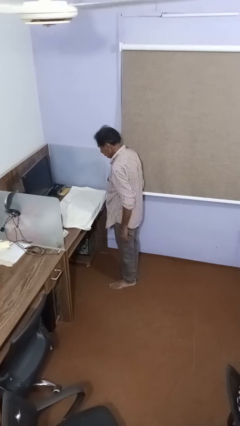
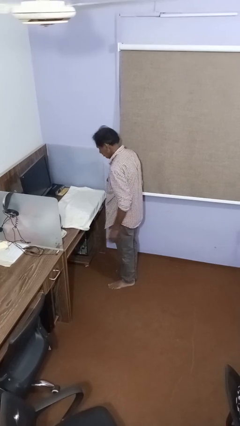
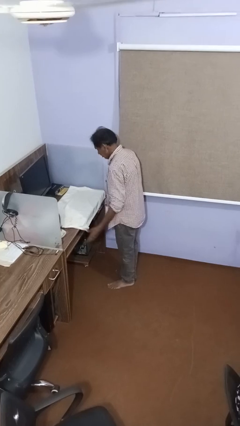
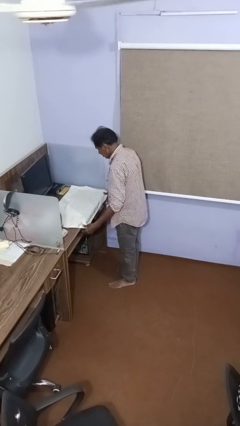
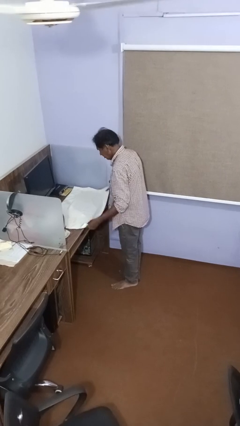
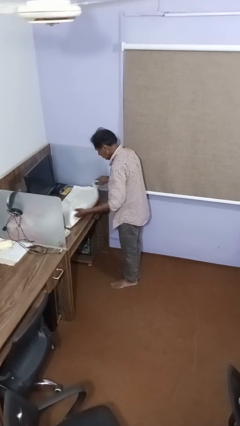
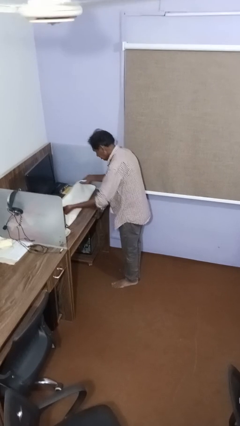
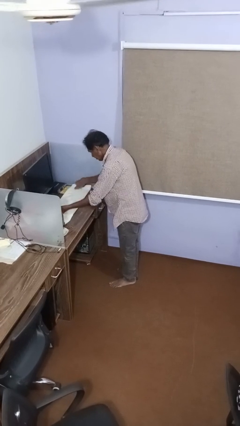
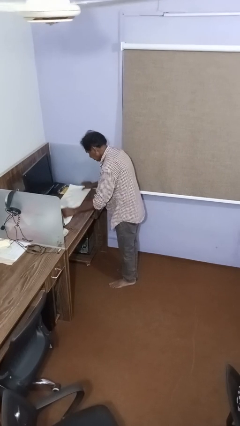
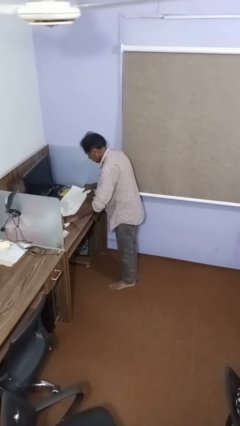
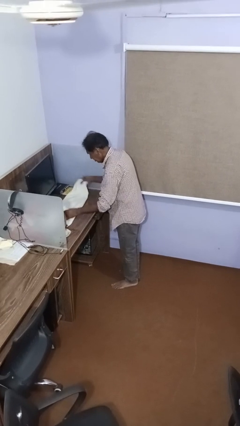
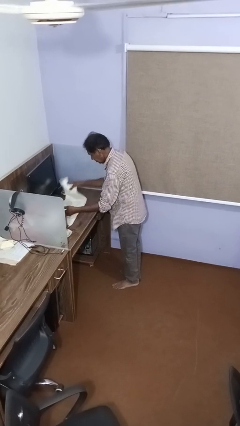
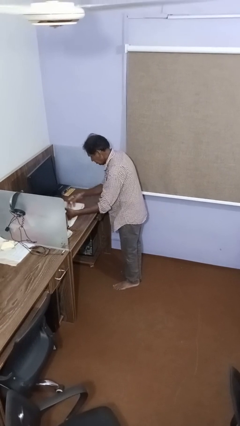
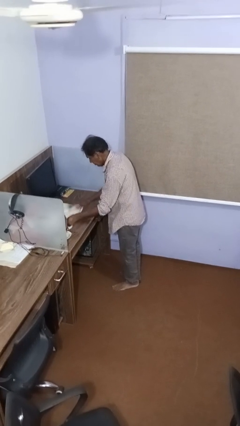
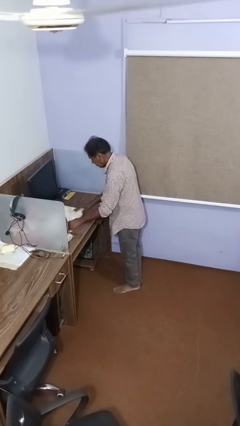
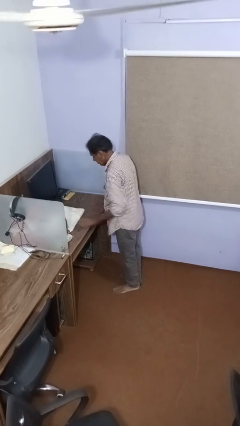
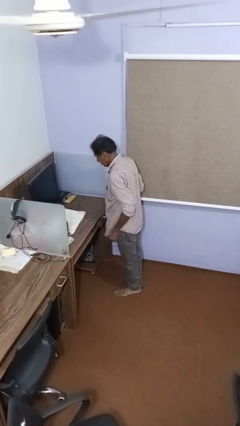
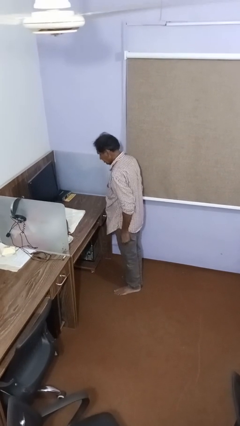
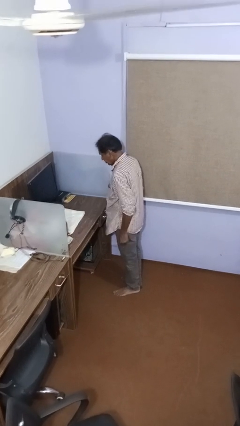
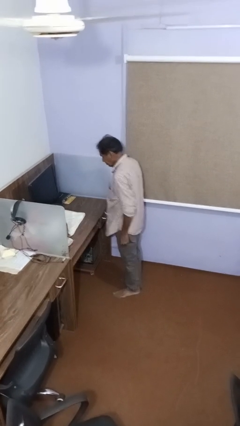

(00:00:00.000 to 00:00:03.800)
person folds towel

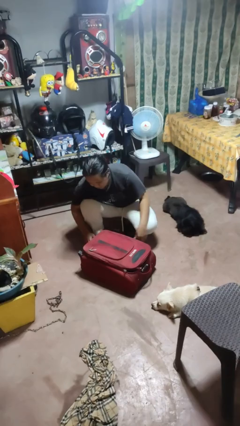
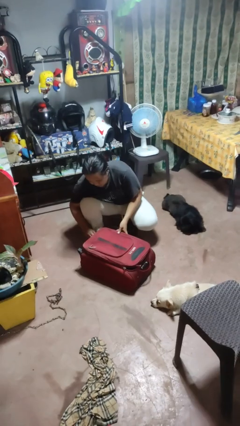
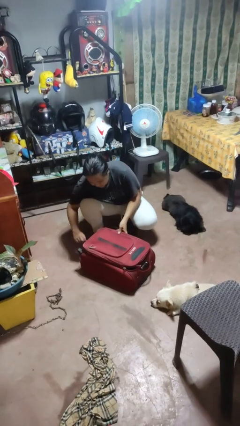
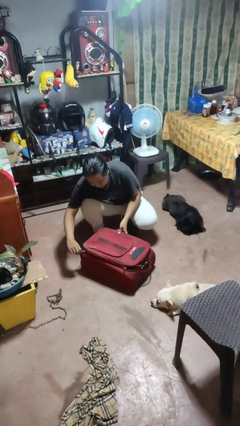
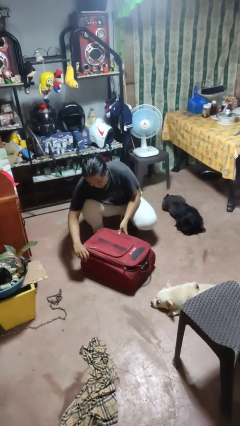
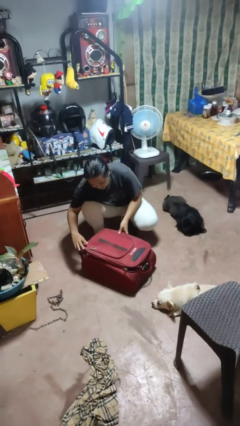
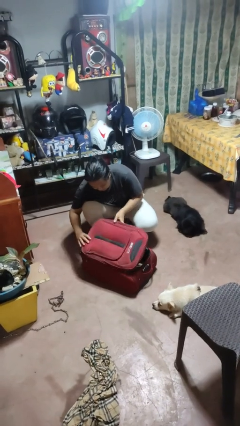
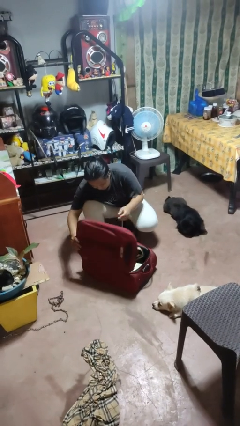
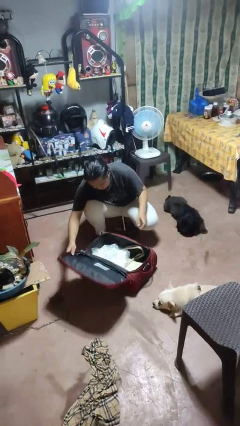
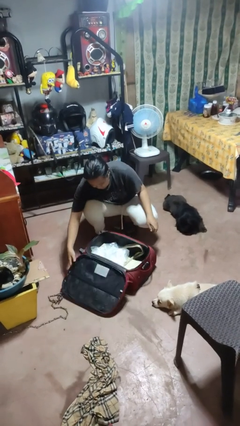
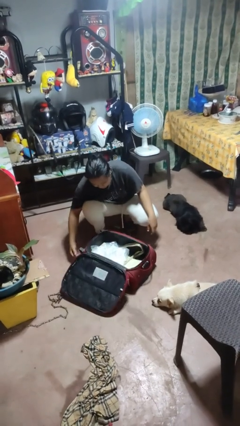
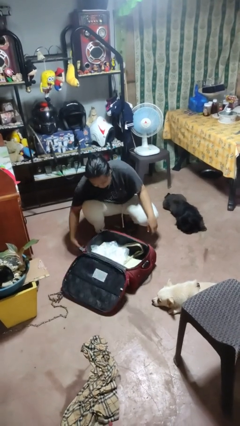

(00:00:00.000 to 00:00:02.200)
person opens suitcase

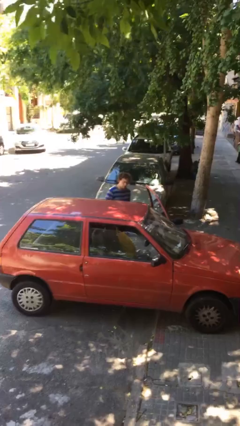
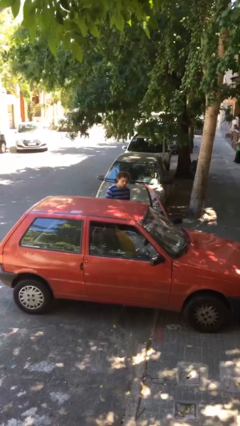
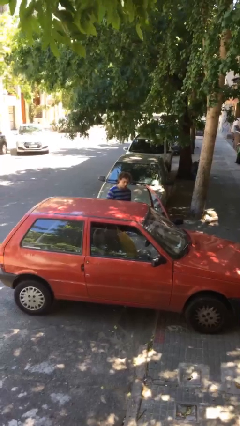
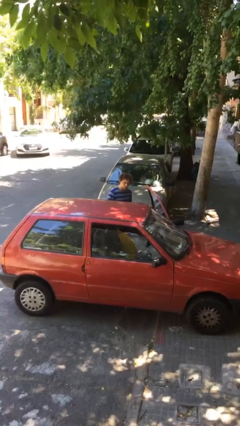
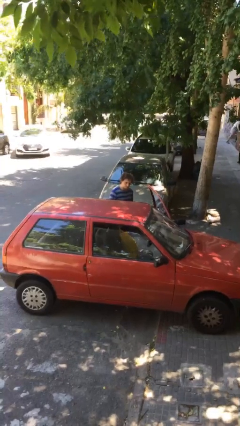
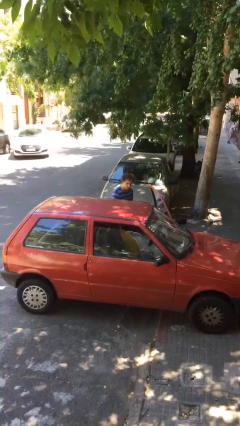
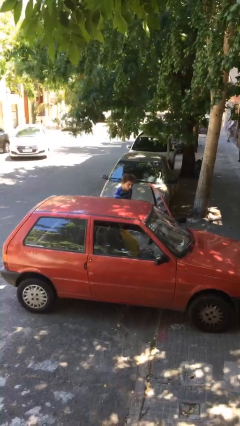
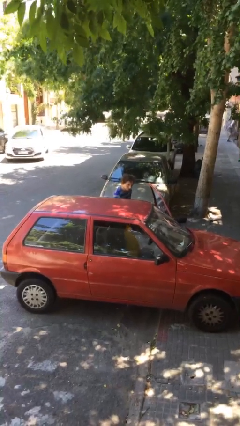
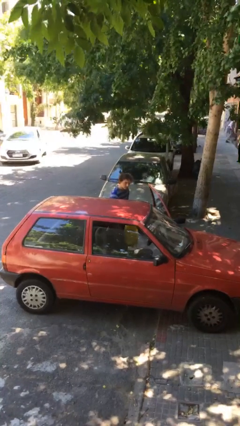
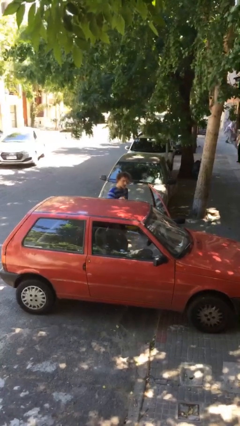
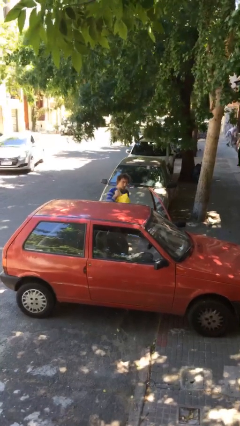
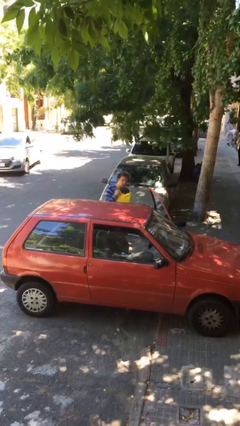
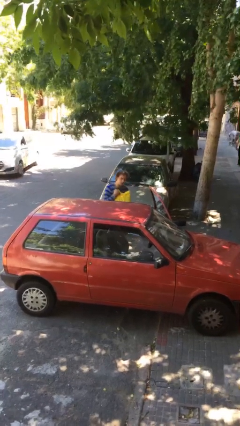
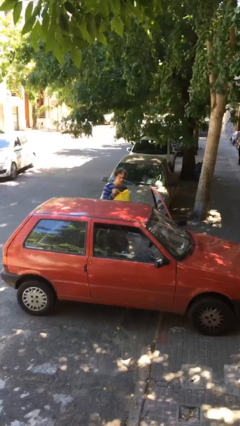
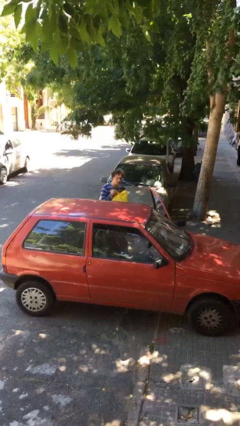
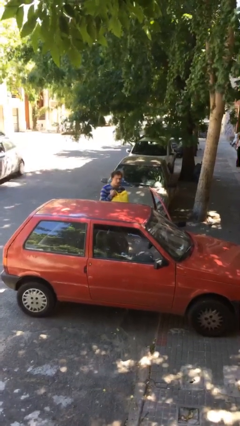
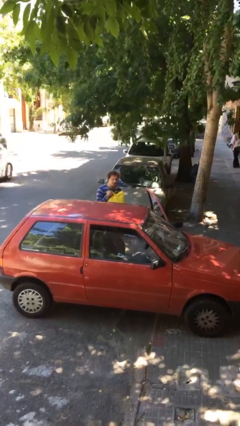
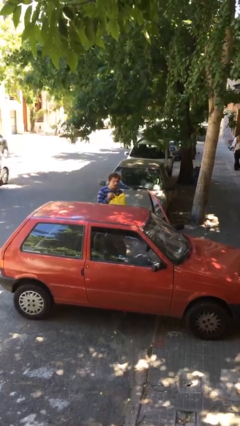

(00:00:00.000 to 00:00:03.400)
person unloads car

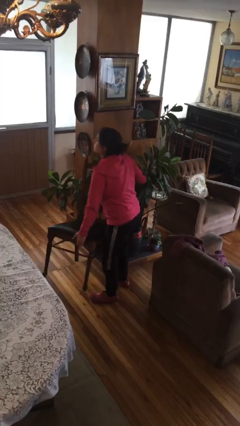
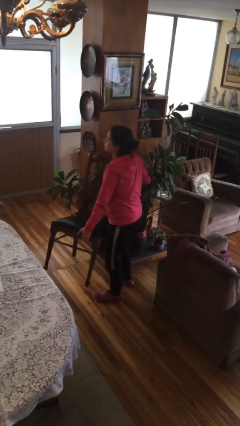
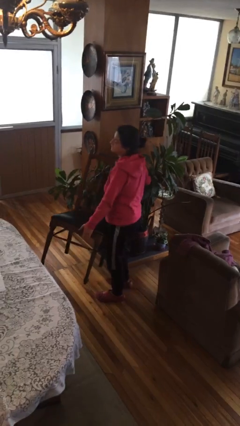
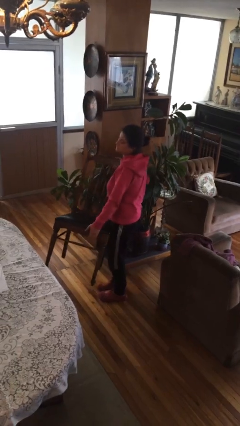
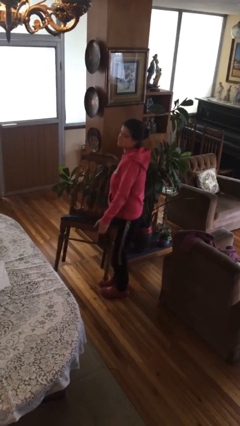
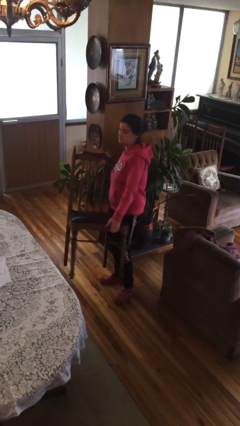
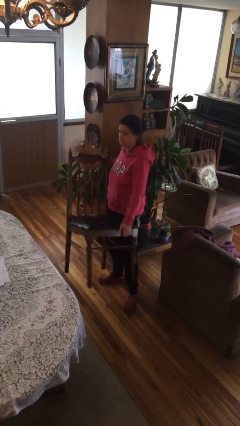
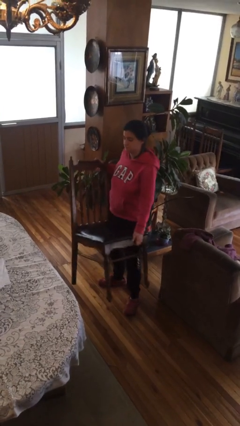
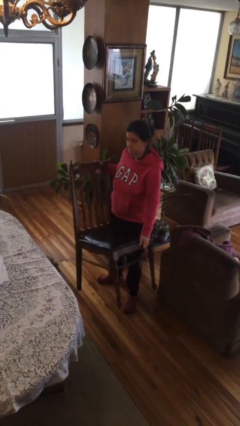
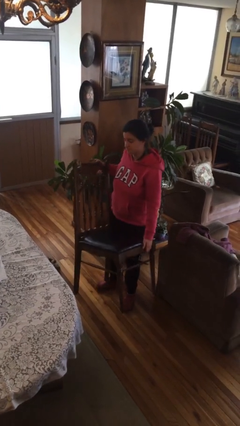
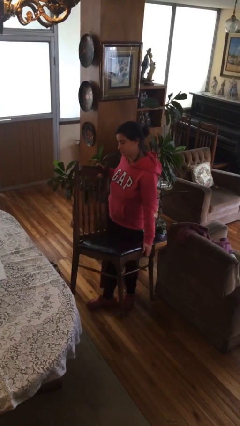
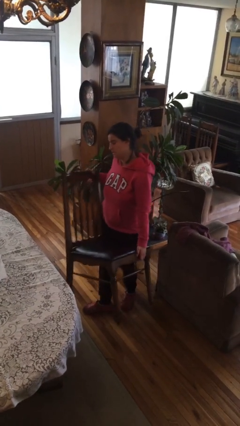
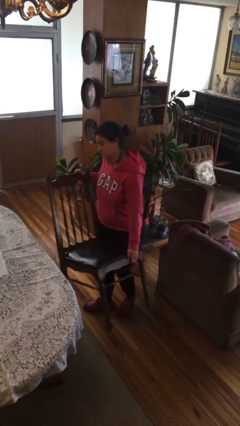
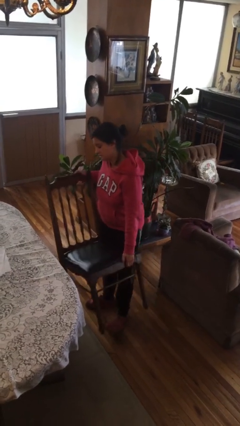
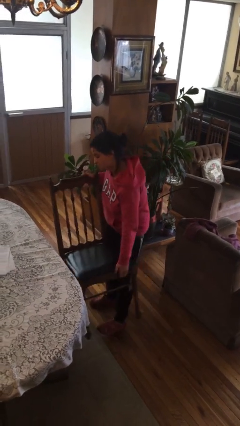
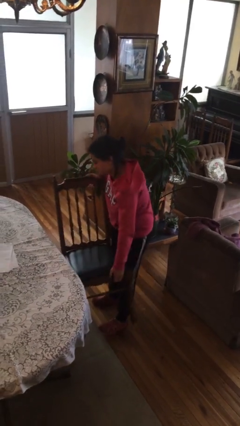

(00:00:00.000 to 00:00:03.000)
person carries heavy object

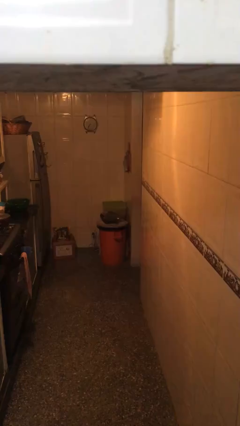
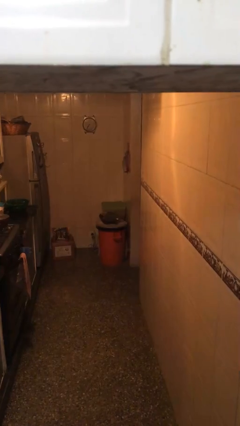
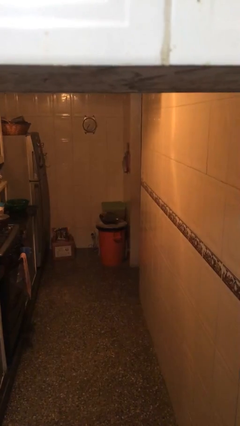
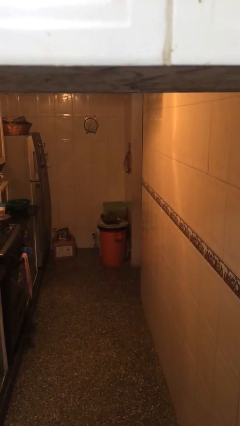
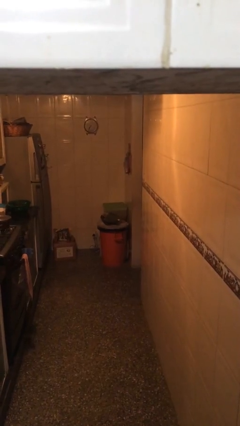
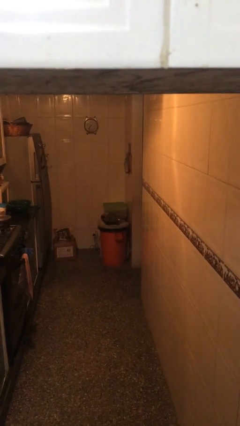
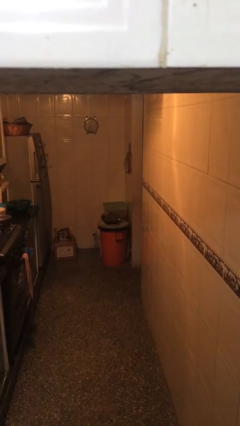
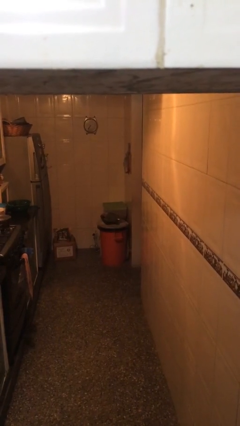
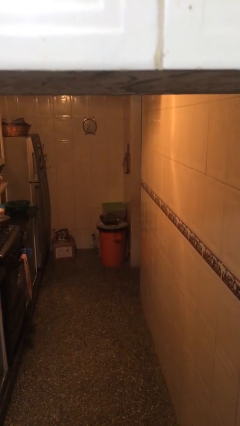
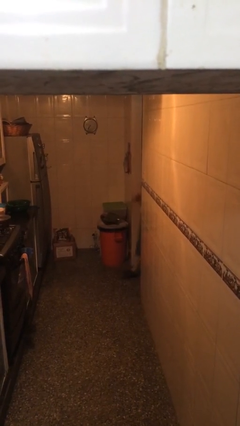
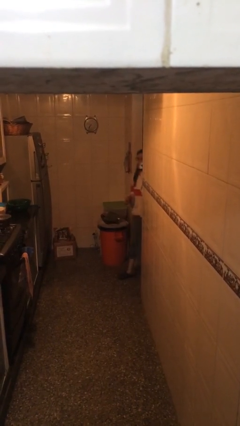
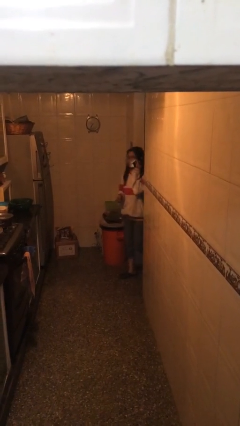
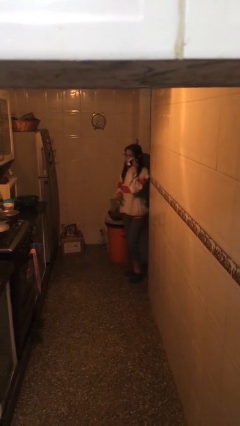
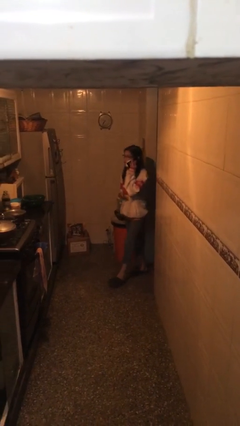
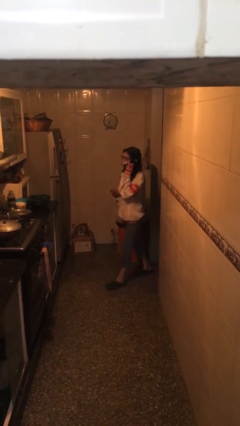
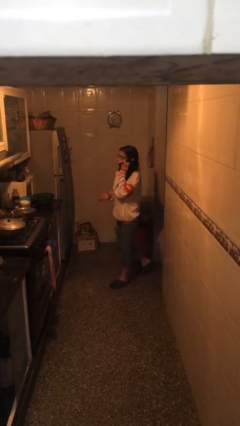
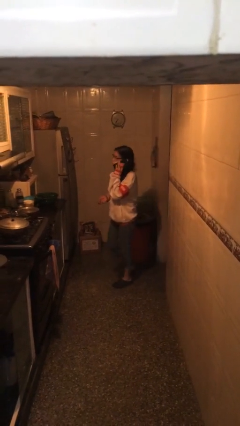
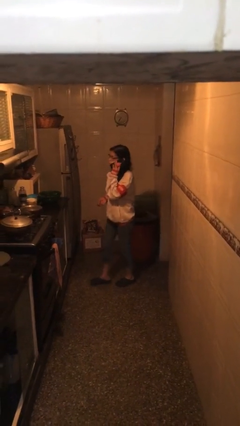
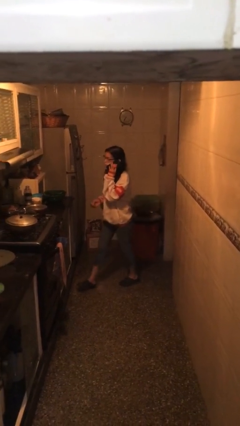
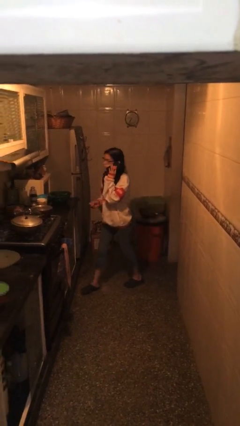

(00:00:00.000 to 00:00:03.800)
person enters scene through structure

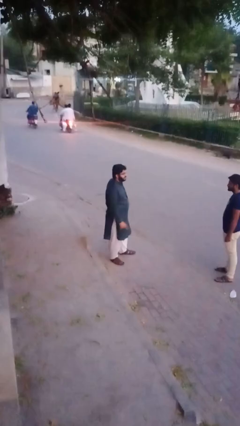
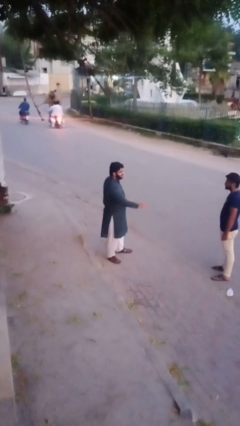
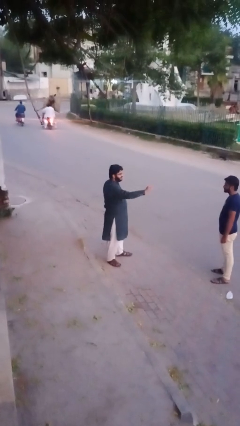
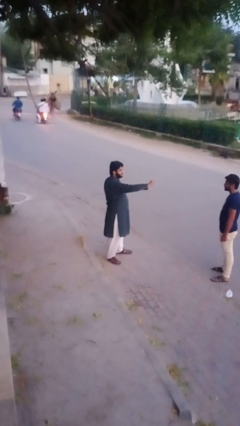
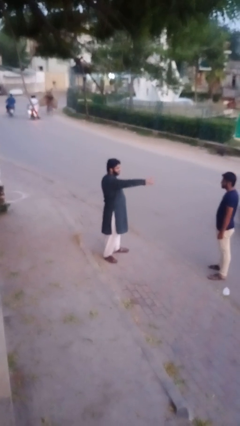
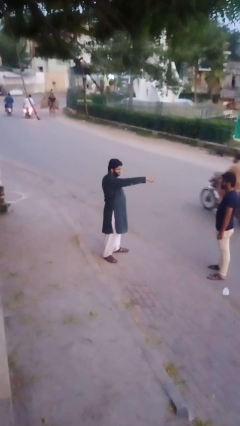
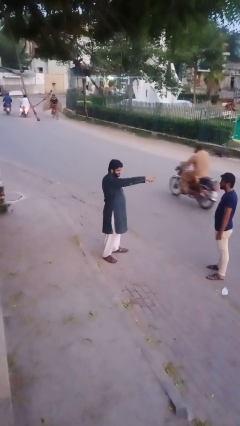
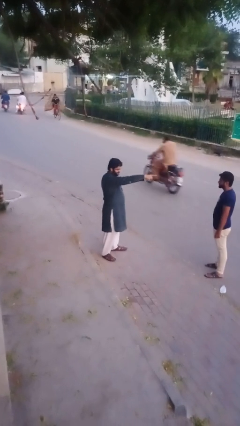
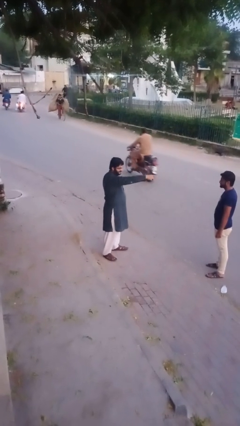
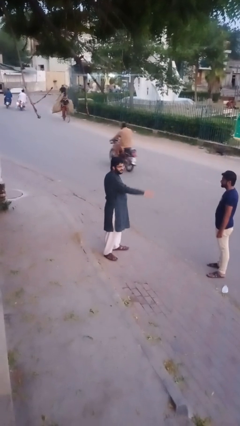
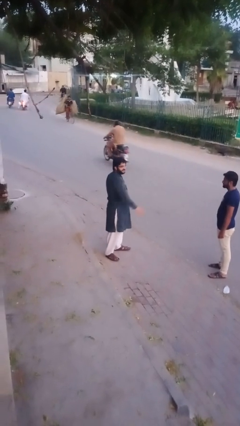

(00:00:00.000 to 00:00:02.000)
person points at person
